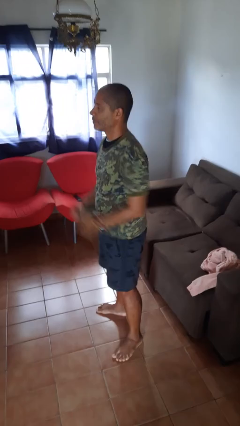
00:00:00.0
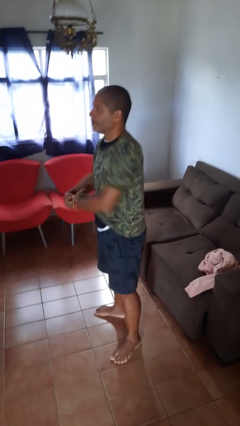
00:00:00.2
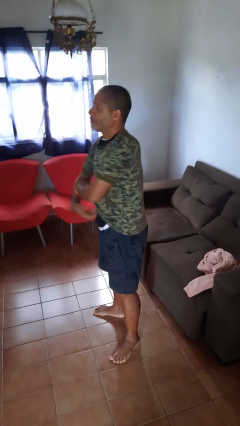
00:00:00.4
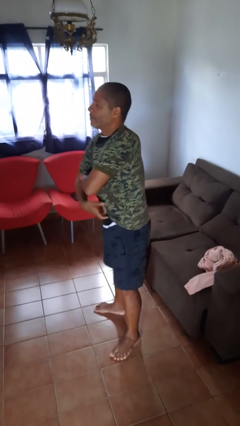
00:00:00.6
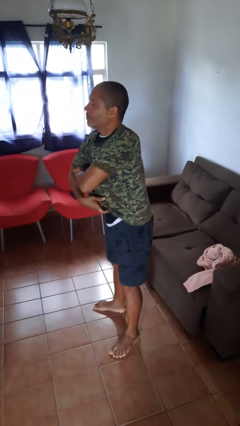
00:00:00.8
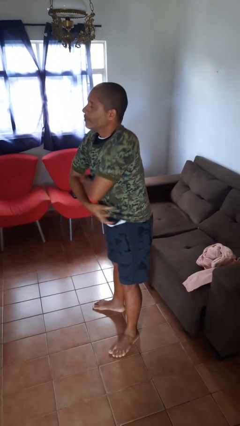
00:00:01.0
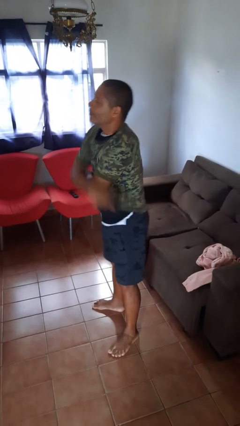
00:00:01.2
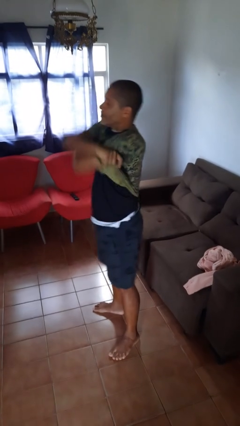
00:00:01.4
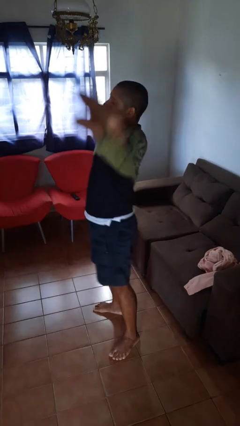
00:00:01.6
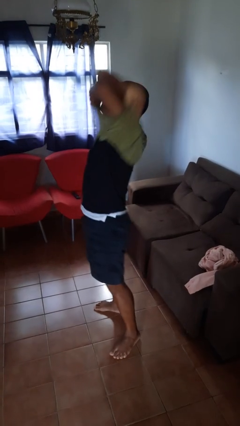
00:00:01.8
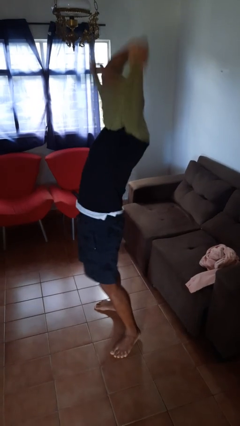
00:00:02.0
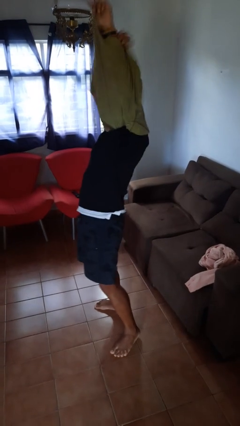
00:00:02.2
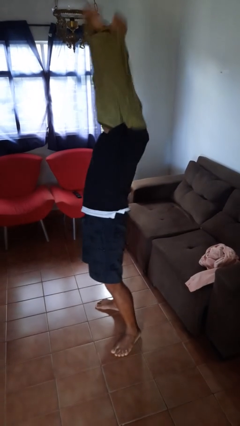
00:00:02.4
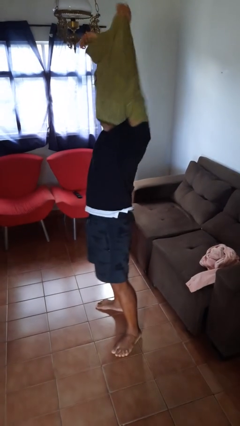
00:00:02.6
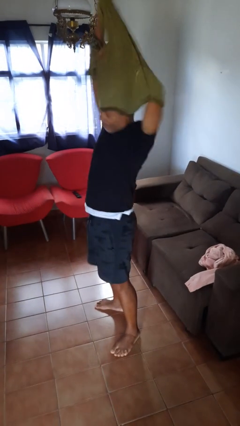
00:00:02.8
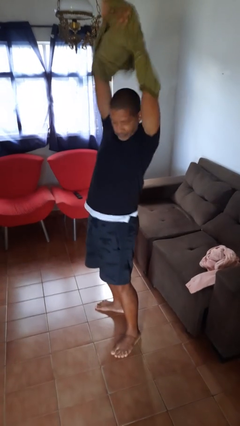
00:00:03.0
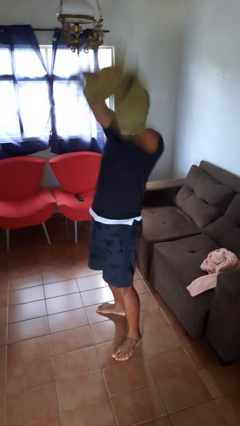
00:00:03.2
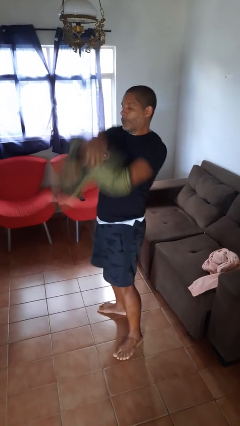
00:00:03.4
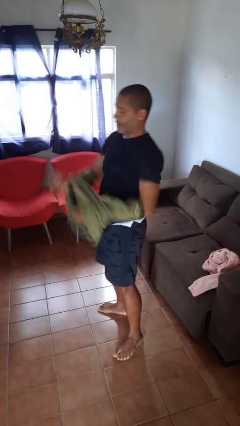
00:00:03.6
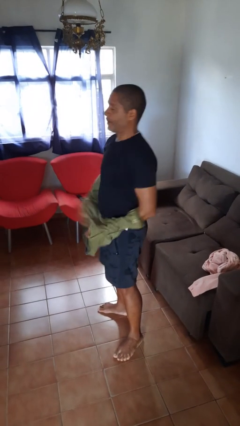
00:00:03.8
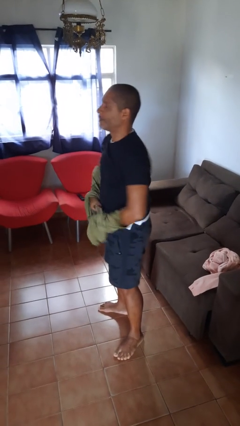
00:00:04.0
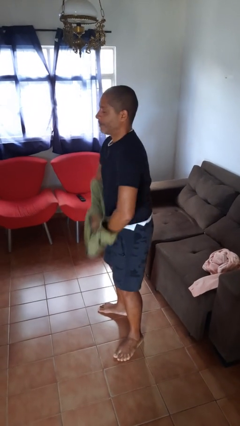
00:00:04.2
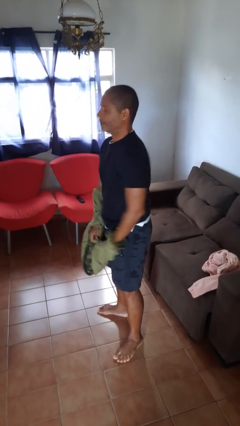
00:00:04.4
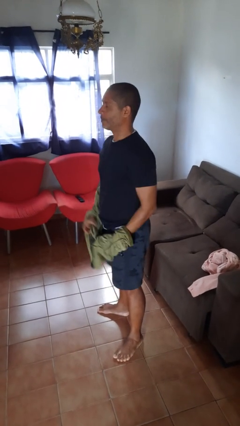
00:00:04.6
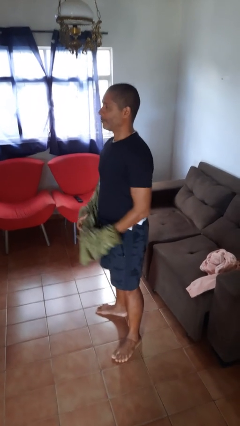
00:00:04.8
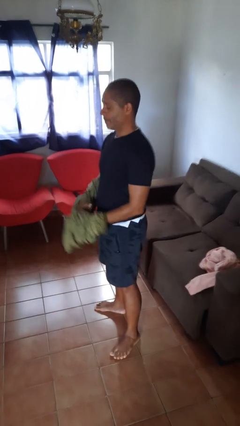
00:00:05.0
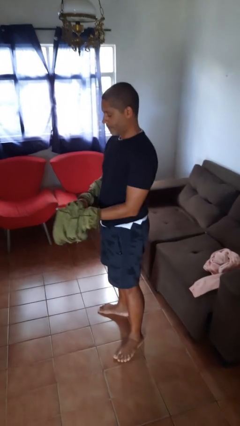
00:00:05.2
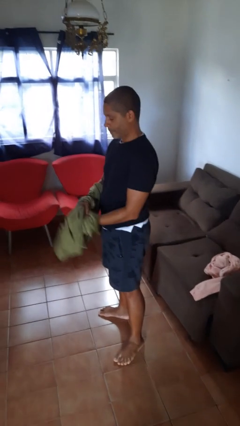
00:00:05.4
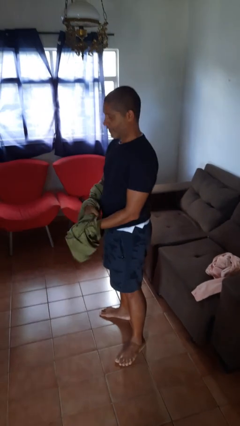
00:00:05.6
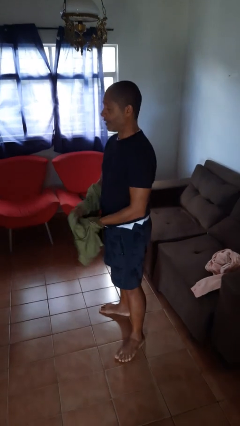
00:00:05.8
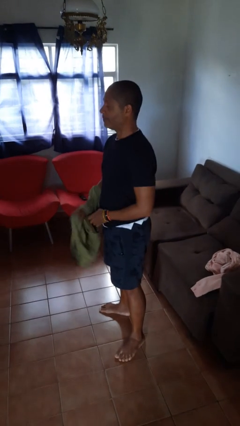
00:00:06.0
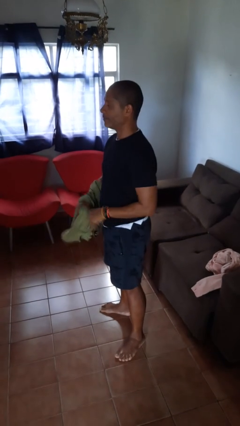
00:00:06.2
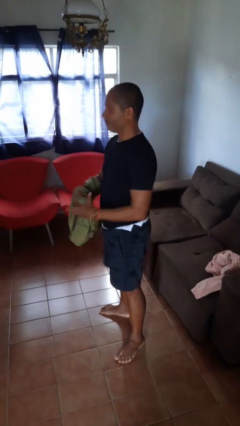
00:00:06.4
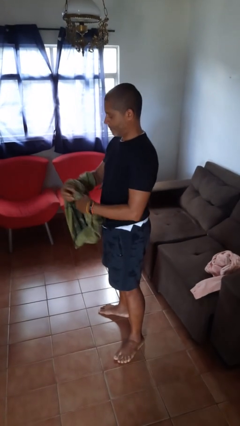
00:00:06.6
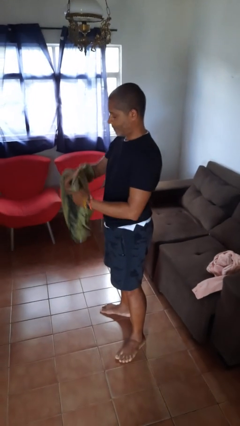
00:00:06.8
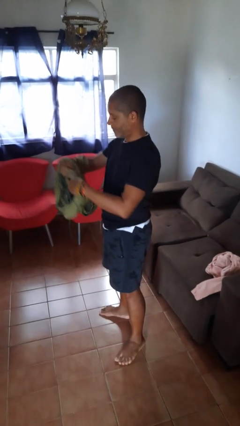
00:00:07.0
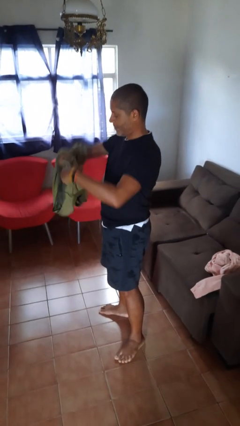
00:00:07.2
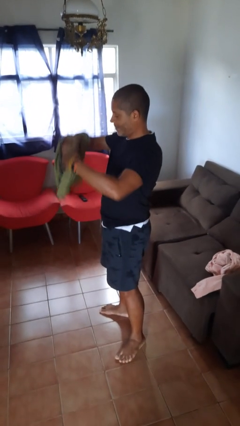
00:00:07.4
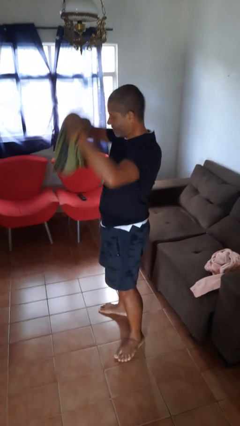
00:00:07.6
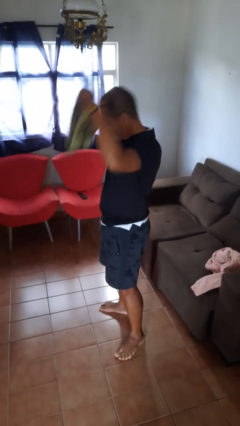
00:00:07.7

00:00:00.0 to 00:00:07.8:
person takes off shirt

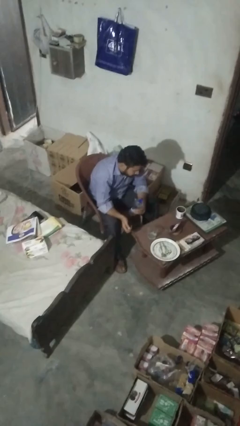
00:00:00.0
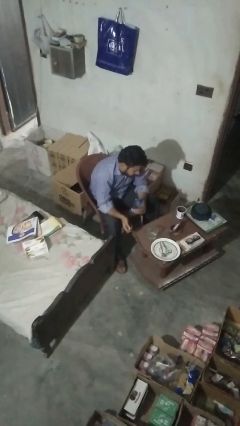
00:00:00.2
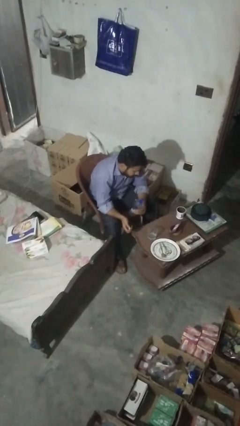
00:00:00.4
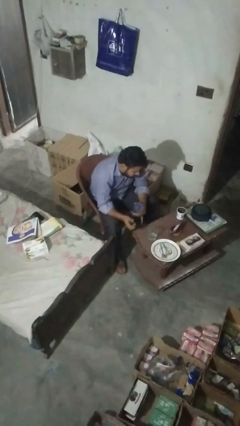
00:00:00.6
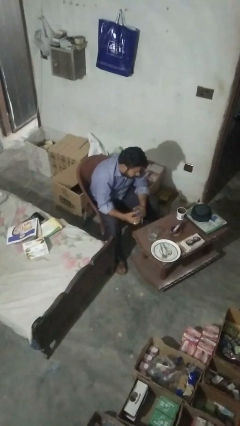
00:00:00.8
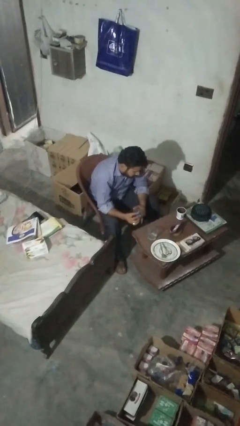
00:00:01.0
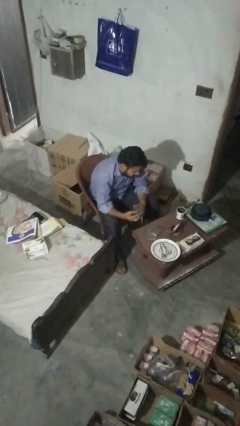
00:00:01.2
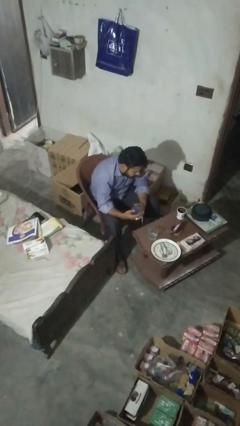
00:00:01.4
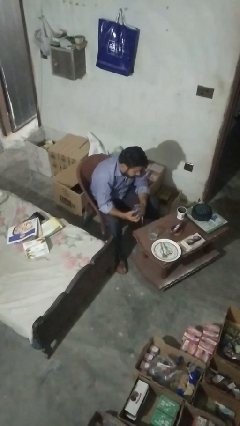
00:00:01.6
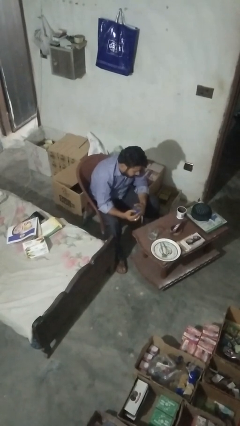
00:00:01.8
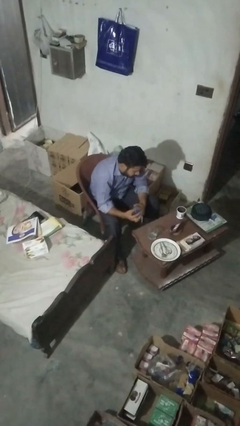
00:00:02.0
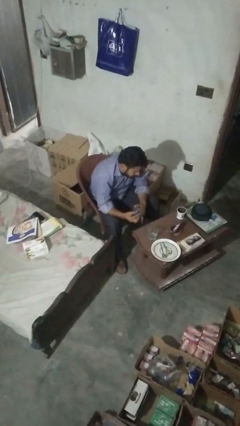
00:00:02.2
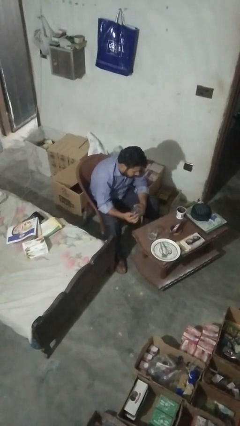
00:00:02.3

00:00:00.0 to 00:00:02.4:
person unscrews lid from bottle

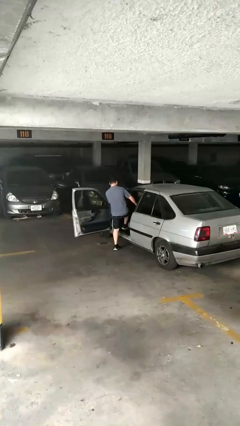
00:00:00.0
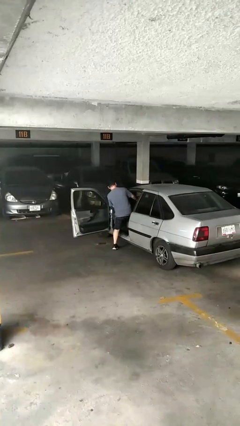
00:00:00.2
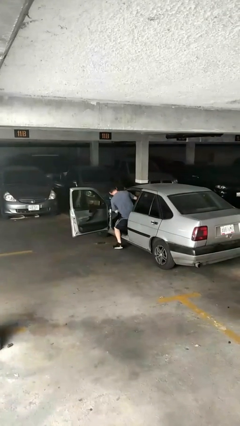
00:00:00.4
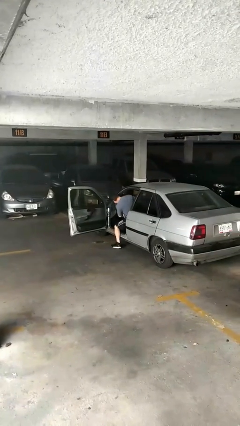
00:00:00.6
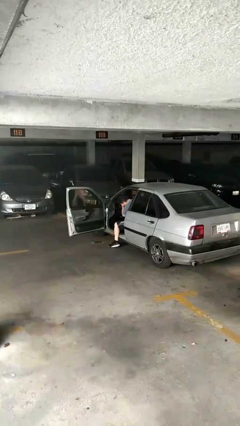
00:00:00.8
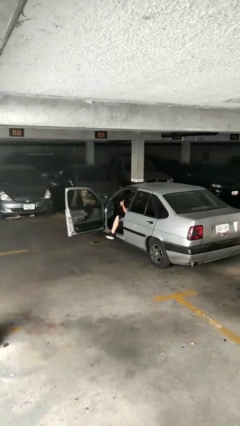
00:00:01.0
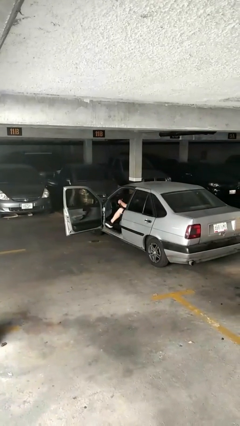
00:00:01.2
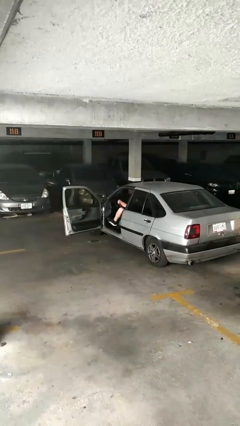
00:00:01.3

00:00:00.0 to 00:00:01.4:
person enters car

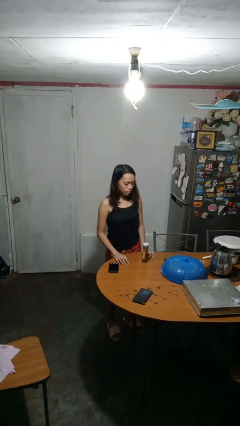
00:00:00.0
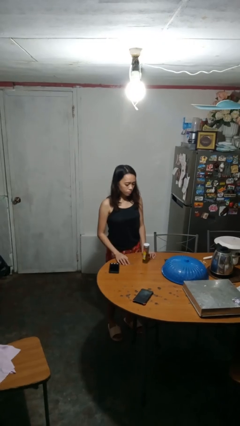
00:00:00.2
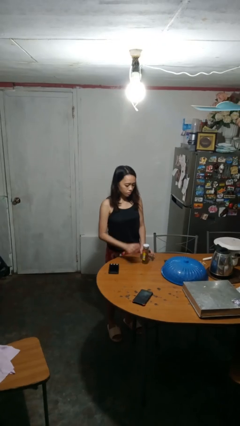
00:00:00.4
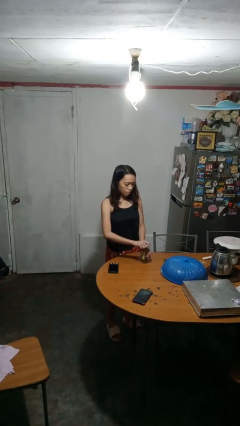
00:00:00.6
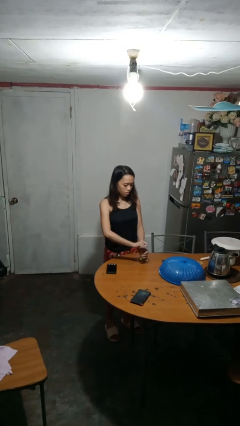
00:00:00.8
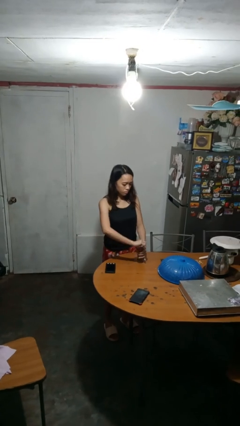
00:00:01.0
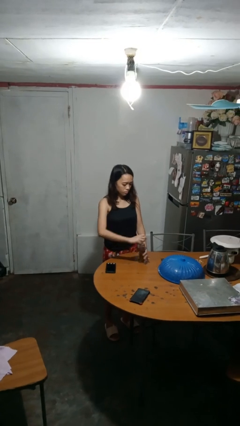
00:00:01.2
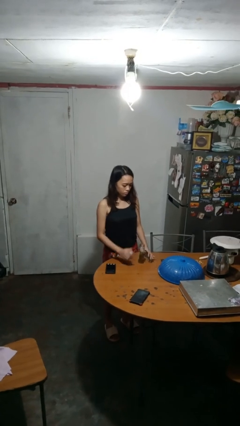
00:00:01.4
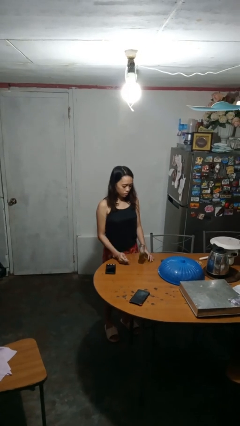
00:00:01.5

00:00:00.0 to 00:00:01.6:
person opens jar

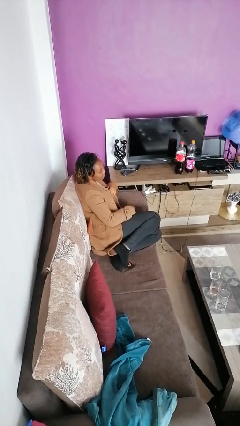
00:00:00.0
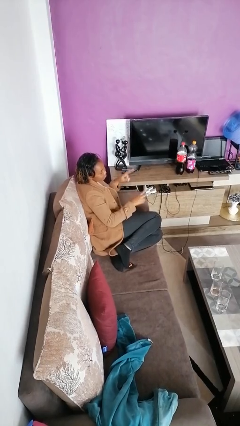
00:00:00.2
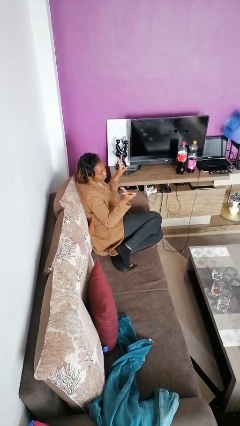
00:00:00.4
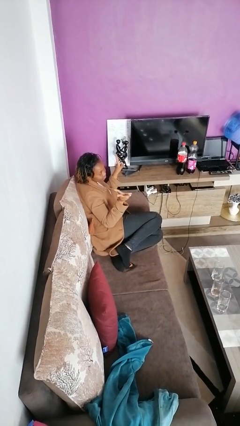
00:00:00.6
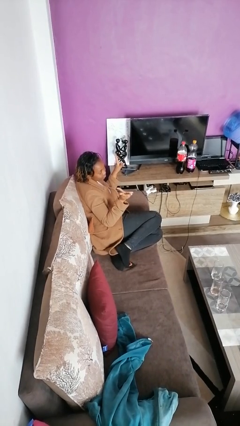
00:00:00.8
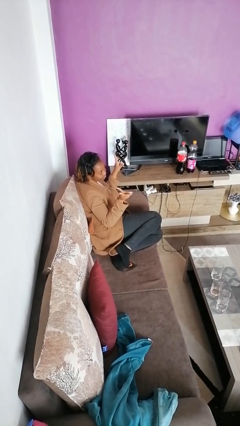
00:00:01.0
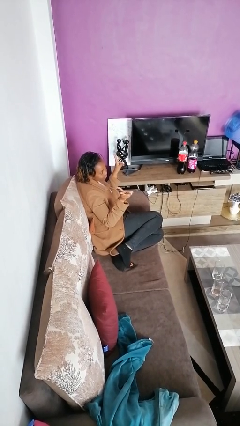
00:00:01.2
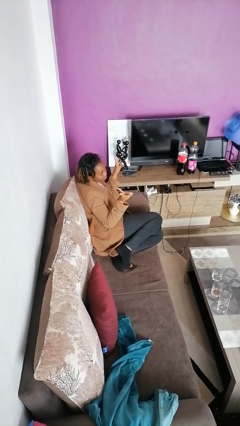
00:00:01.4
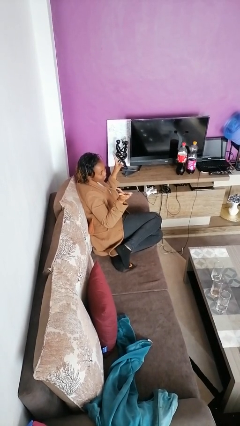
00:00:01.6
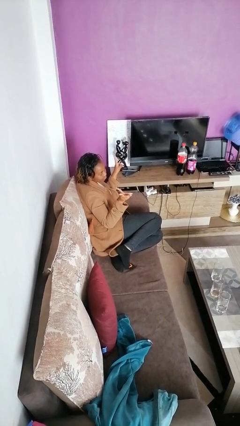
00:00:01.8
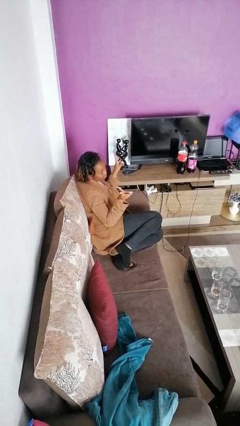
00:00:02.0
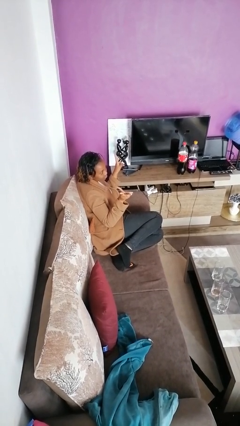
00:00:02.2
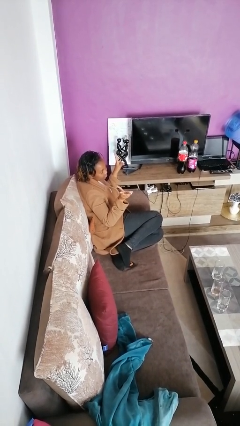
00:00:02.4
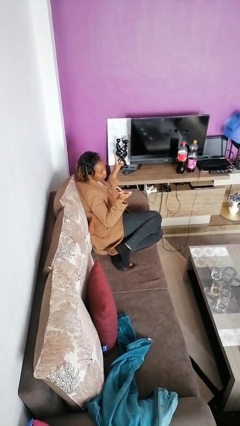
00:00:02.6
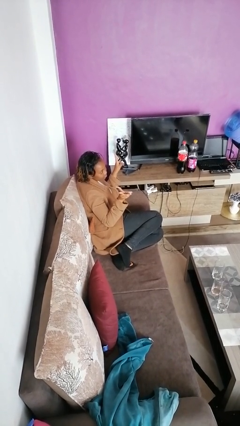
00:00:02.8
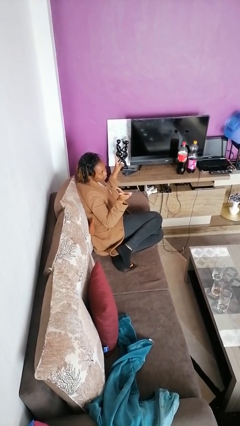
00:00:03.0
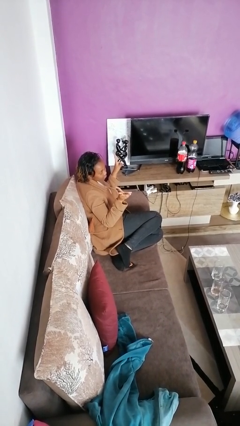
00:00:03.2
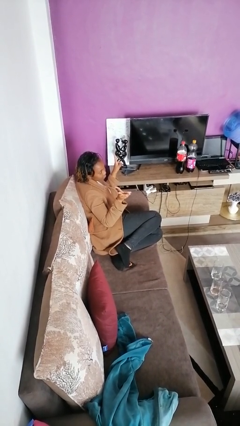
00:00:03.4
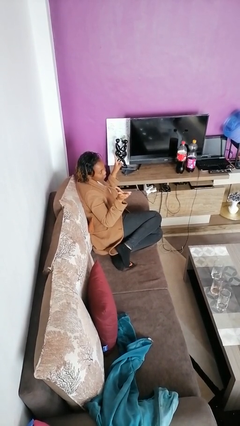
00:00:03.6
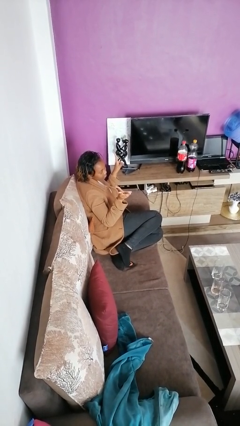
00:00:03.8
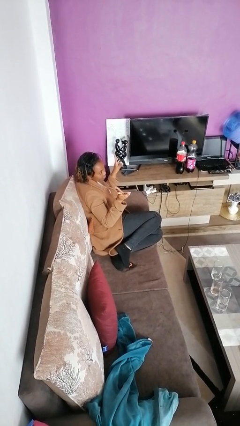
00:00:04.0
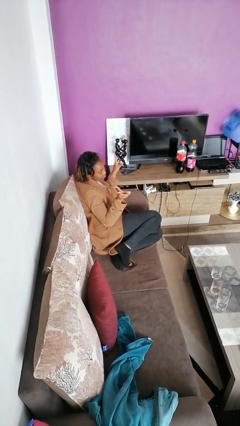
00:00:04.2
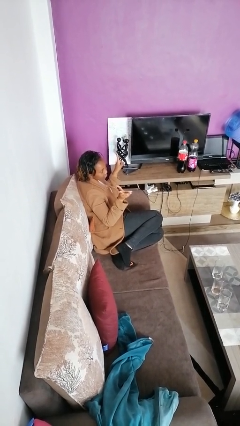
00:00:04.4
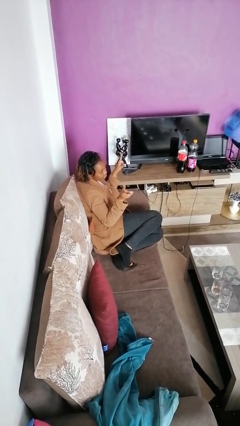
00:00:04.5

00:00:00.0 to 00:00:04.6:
person gestures peace
